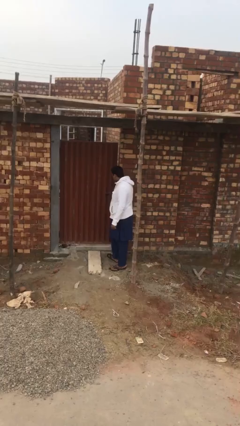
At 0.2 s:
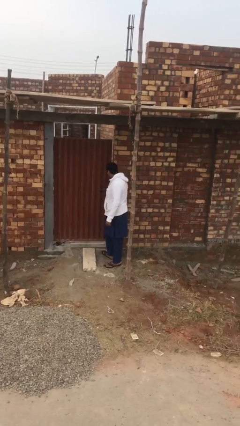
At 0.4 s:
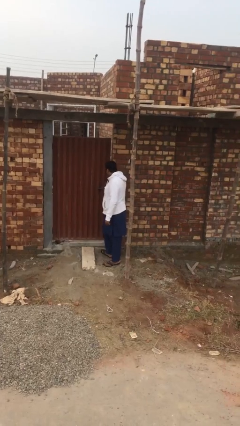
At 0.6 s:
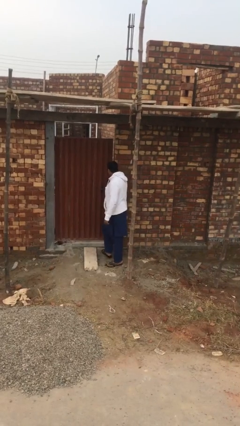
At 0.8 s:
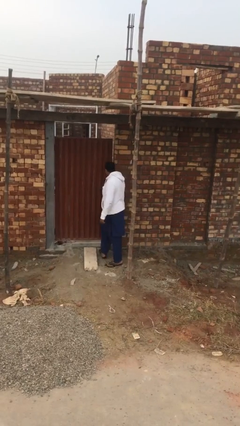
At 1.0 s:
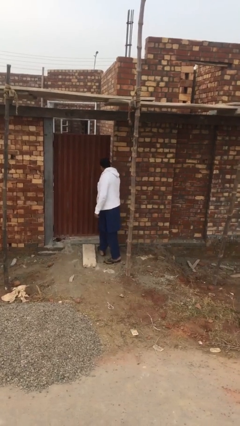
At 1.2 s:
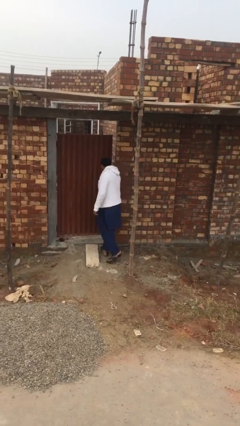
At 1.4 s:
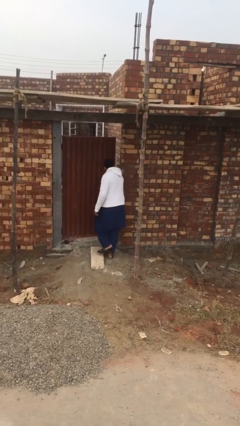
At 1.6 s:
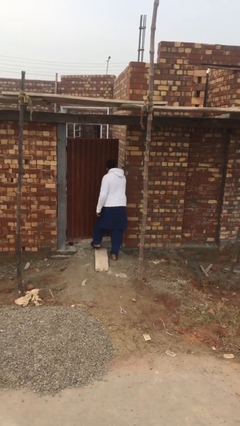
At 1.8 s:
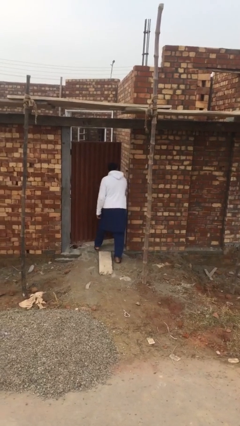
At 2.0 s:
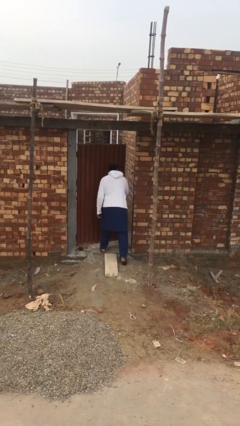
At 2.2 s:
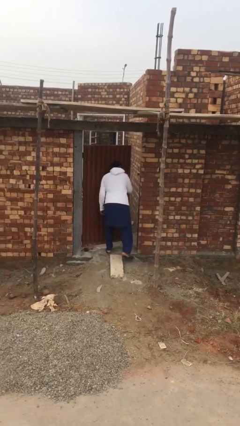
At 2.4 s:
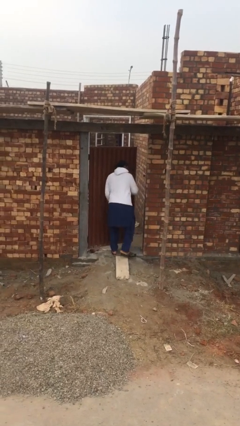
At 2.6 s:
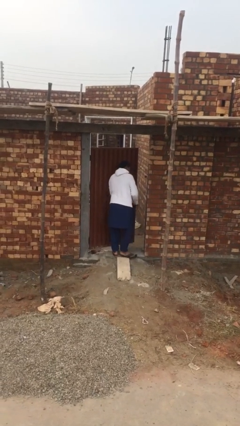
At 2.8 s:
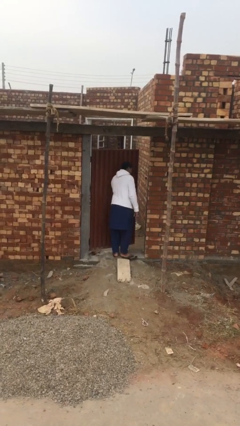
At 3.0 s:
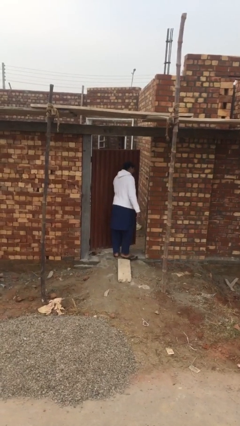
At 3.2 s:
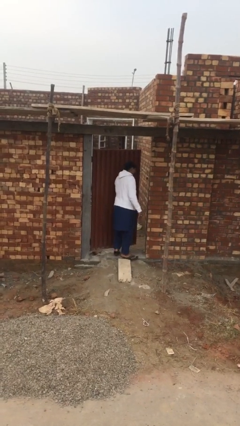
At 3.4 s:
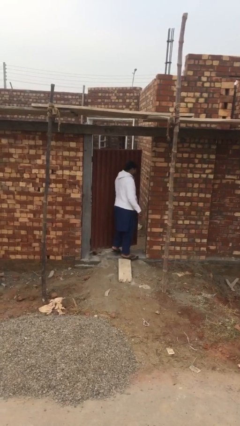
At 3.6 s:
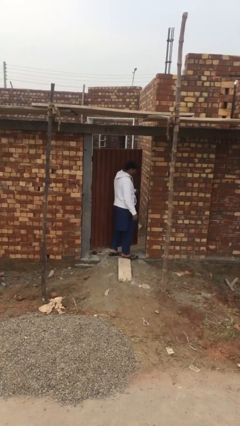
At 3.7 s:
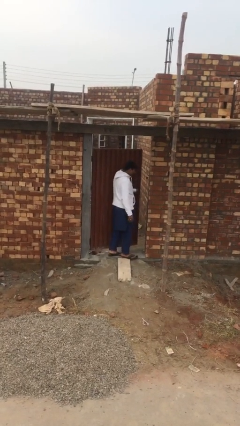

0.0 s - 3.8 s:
person opens facility door

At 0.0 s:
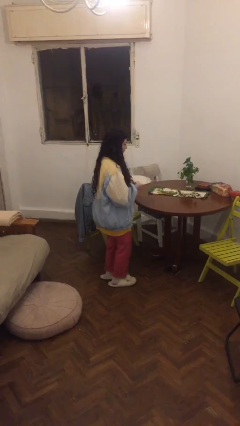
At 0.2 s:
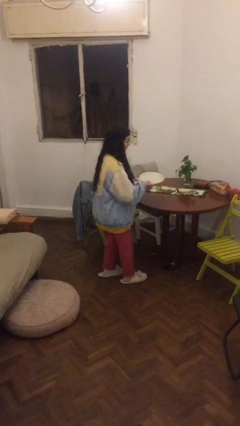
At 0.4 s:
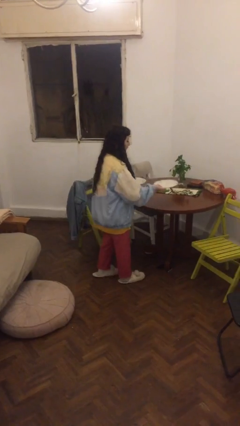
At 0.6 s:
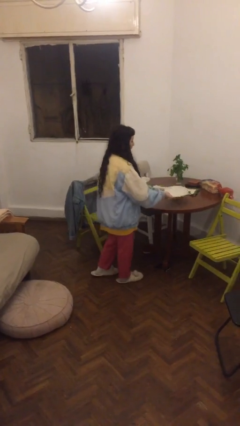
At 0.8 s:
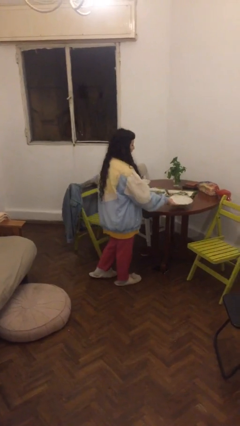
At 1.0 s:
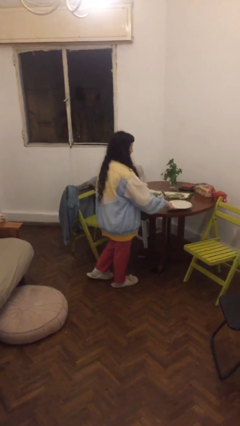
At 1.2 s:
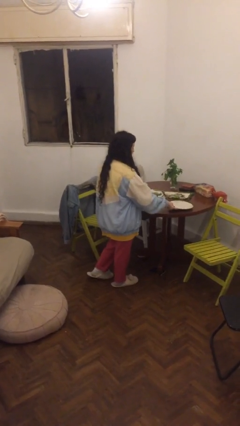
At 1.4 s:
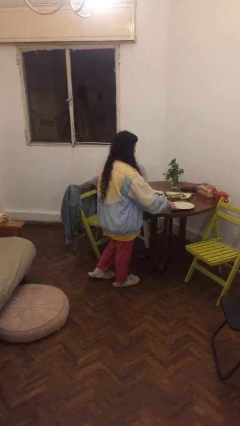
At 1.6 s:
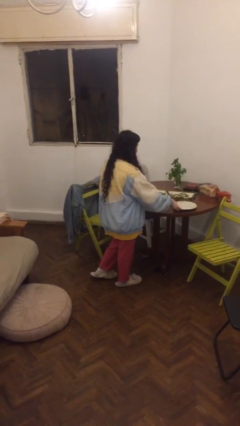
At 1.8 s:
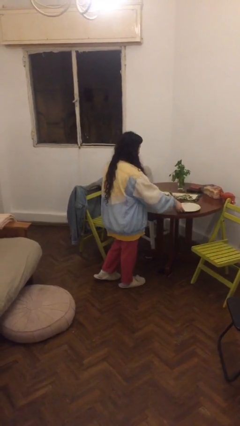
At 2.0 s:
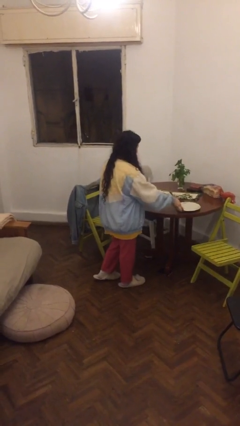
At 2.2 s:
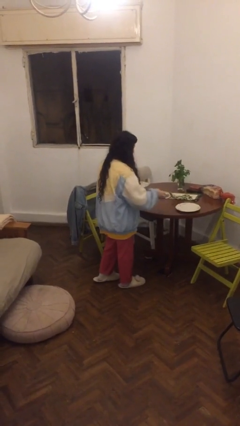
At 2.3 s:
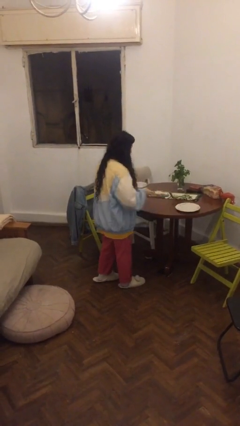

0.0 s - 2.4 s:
person sets table

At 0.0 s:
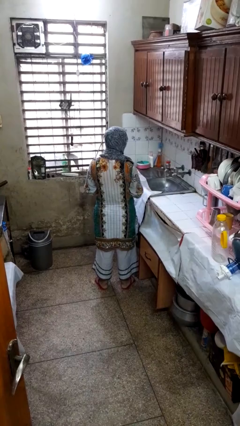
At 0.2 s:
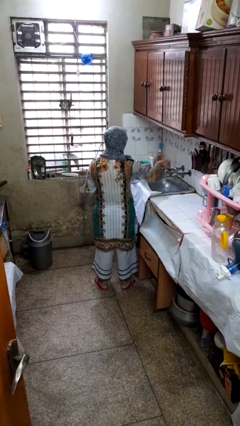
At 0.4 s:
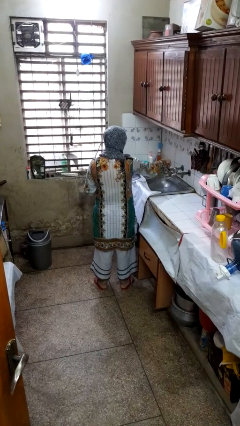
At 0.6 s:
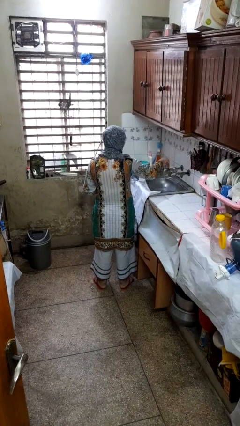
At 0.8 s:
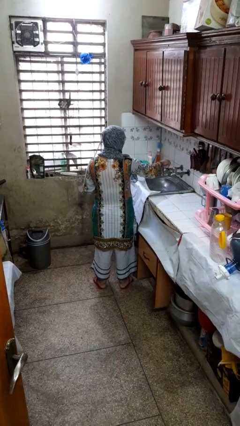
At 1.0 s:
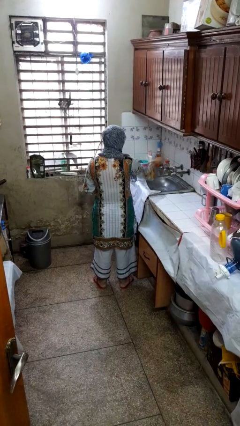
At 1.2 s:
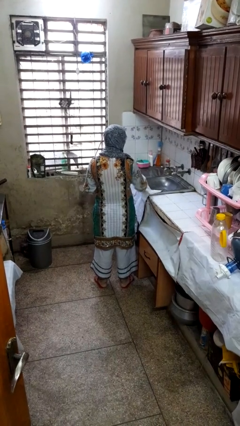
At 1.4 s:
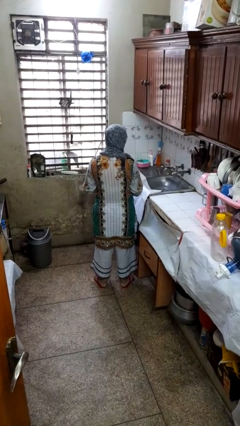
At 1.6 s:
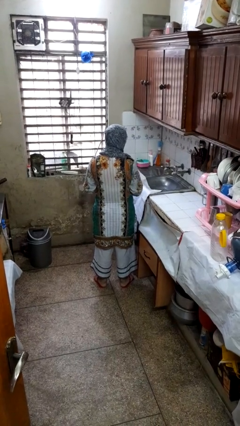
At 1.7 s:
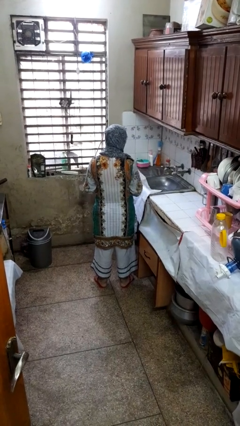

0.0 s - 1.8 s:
person turns off faucet

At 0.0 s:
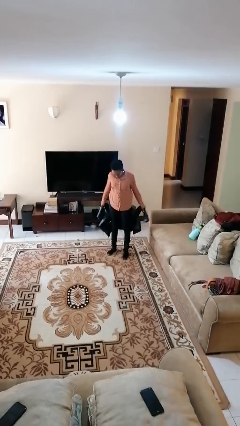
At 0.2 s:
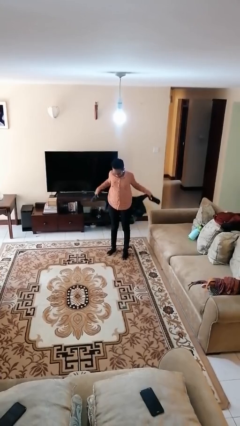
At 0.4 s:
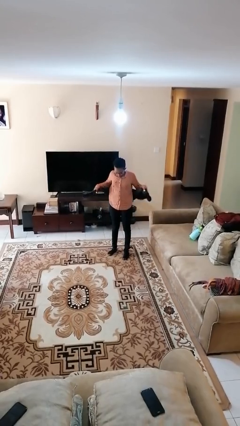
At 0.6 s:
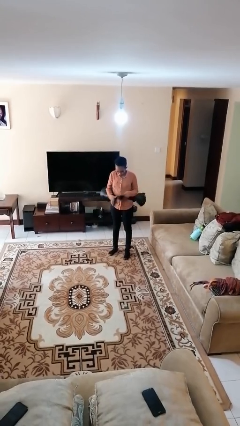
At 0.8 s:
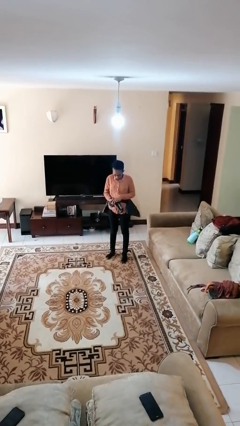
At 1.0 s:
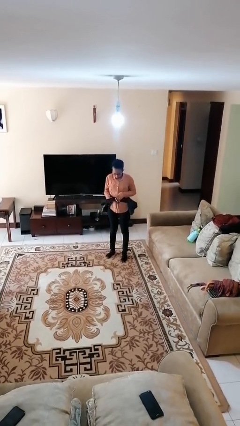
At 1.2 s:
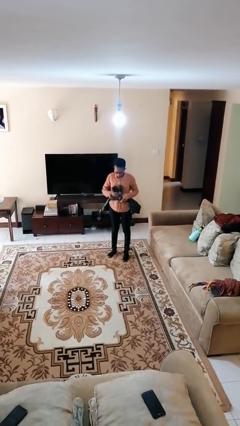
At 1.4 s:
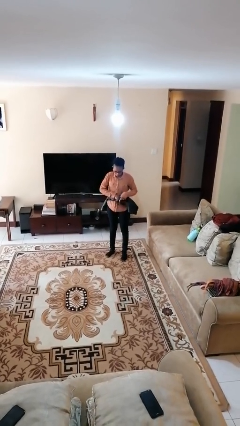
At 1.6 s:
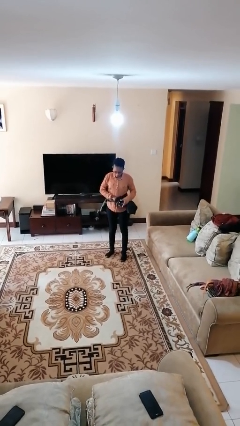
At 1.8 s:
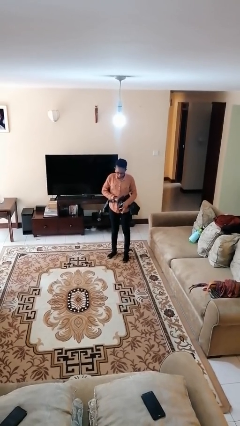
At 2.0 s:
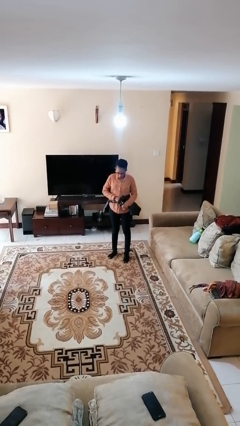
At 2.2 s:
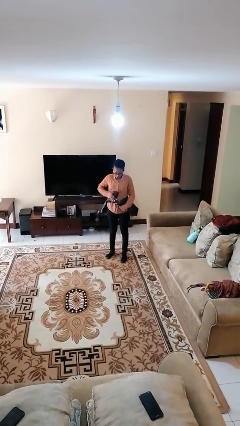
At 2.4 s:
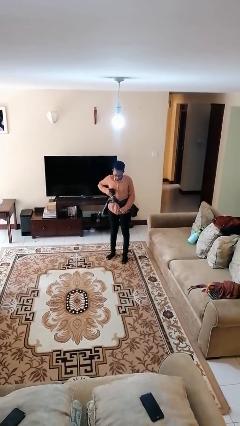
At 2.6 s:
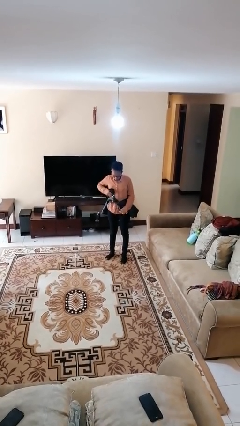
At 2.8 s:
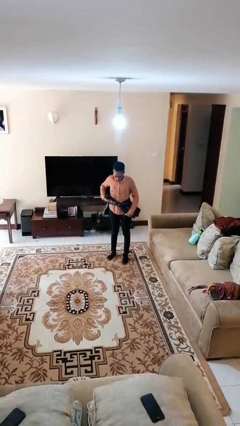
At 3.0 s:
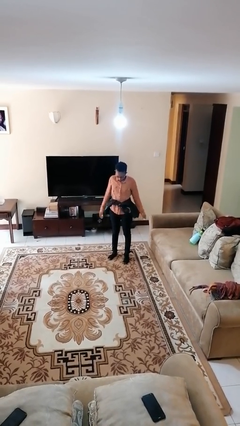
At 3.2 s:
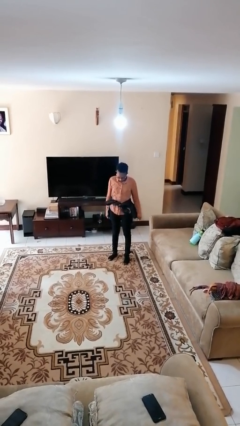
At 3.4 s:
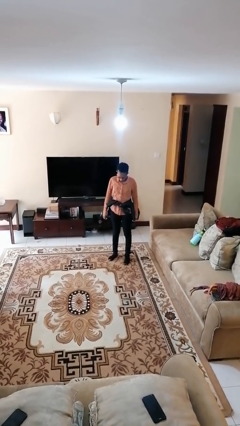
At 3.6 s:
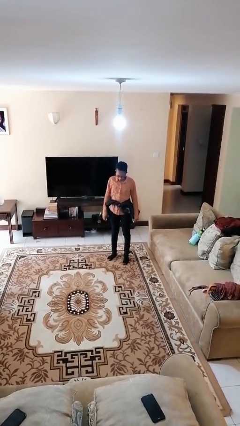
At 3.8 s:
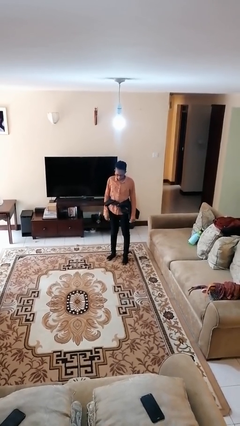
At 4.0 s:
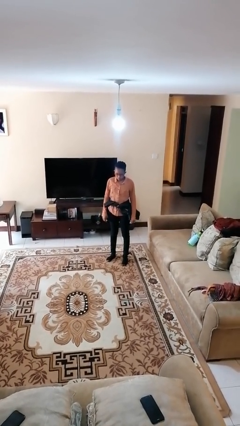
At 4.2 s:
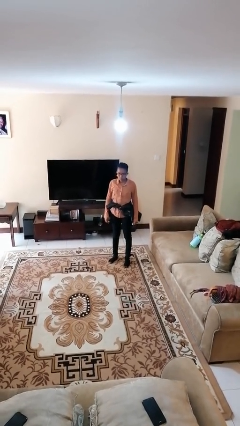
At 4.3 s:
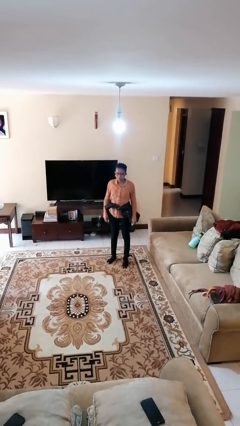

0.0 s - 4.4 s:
person ties jacket around waist

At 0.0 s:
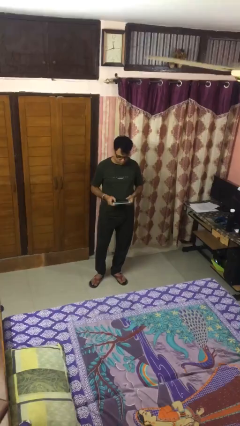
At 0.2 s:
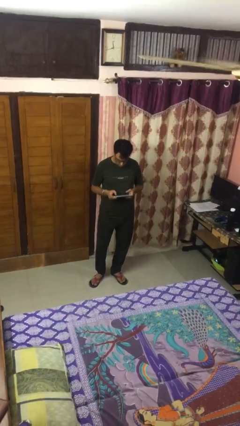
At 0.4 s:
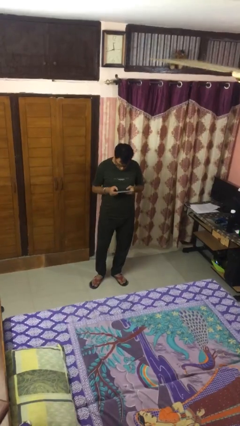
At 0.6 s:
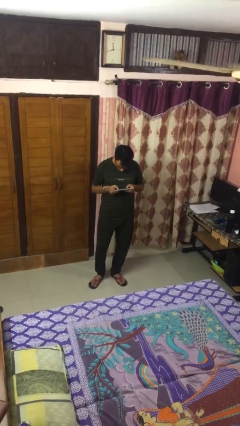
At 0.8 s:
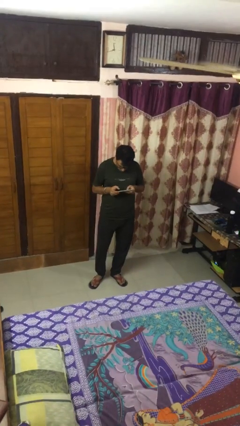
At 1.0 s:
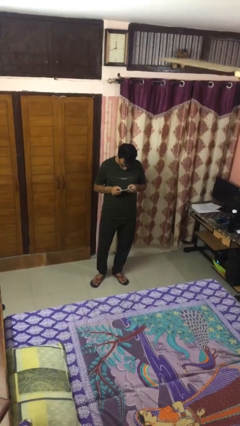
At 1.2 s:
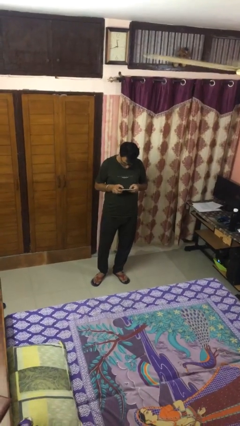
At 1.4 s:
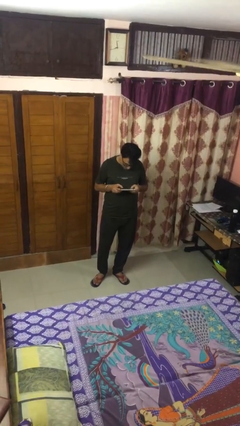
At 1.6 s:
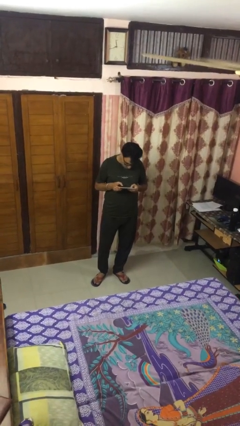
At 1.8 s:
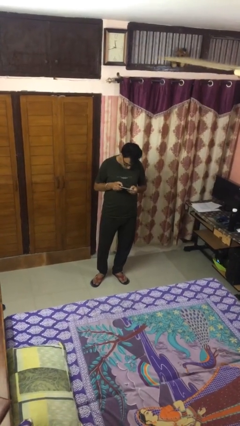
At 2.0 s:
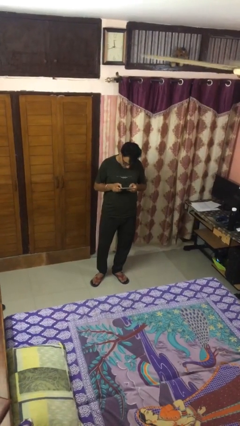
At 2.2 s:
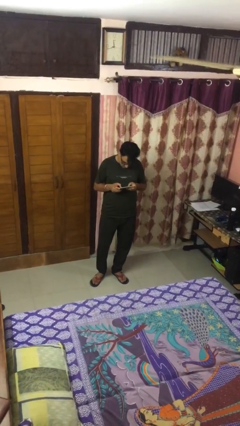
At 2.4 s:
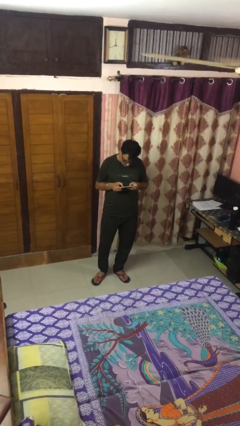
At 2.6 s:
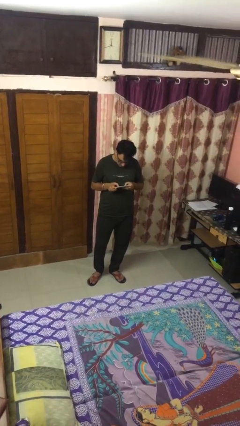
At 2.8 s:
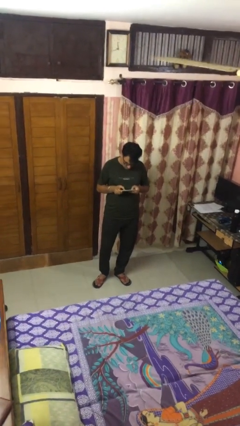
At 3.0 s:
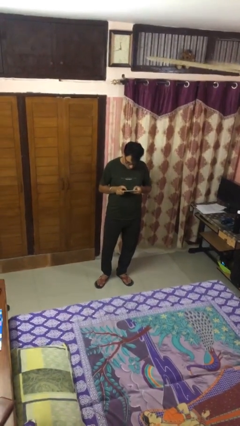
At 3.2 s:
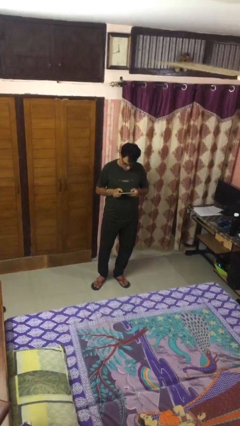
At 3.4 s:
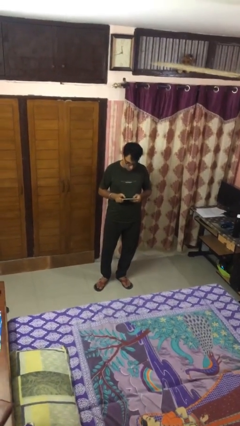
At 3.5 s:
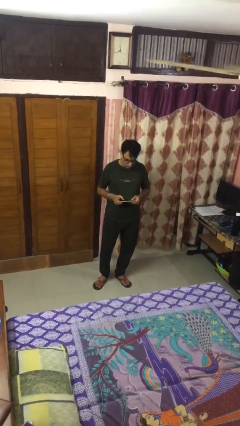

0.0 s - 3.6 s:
person interacts with handheld game

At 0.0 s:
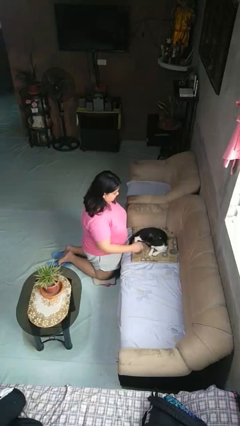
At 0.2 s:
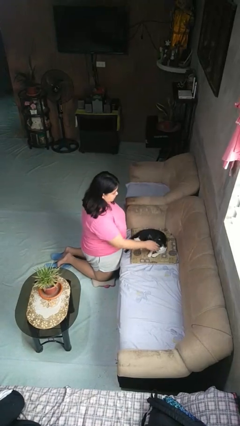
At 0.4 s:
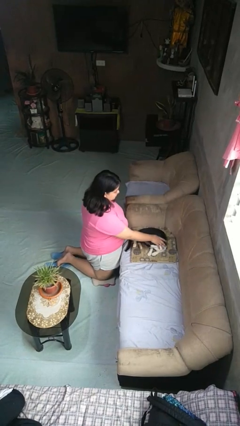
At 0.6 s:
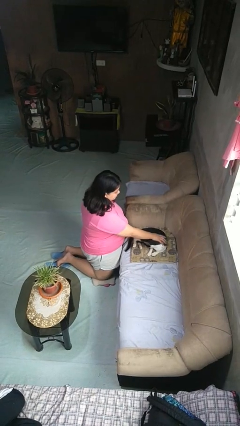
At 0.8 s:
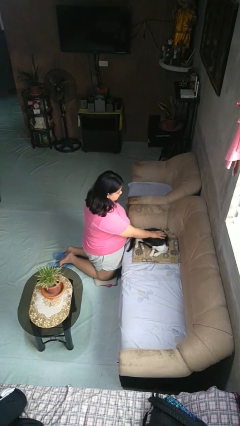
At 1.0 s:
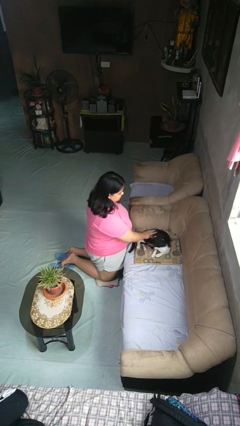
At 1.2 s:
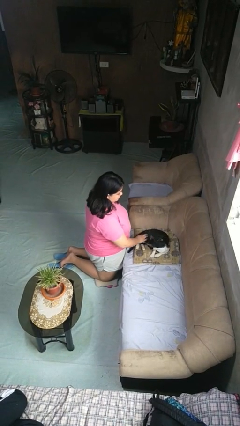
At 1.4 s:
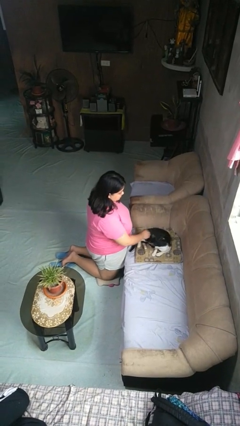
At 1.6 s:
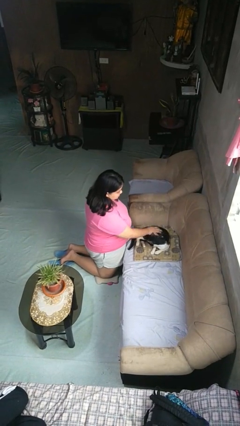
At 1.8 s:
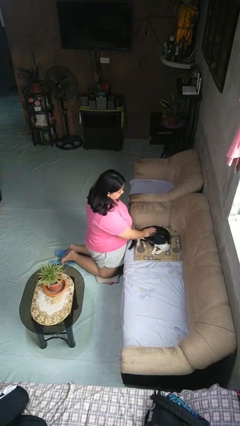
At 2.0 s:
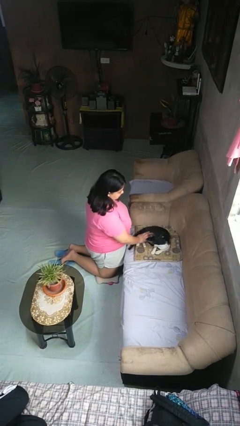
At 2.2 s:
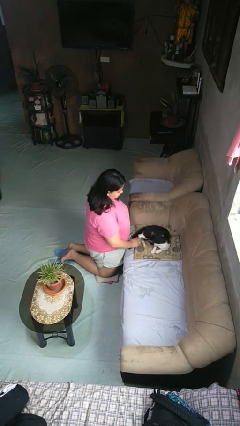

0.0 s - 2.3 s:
person pets cat
